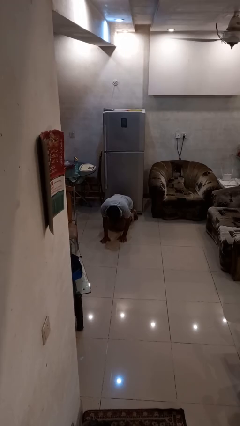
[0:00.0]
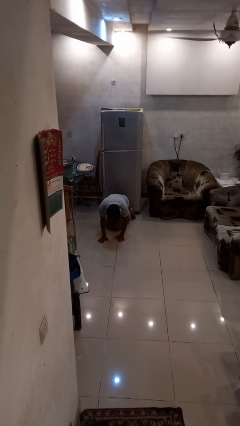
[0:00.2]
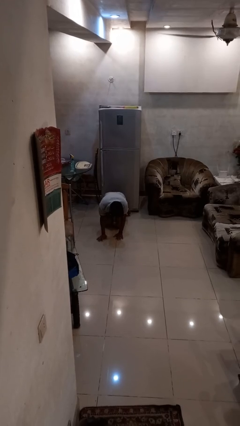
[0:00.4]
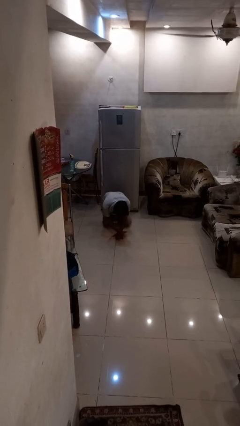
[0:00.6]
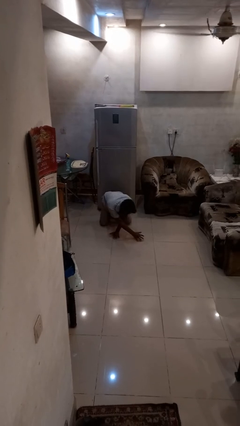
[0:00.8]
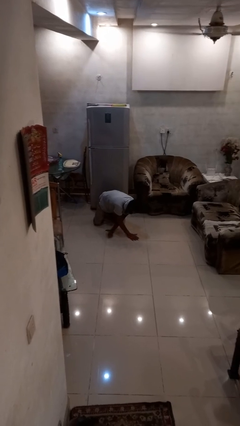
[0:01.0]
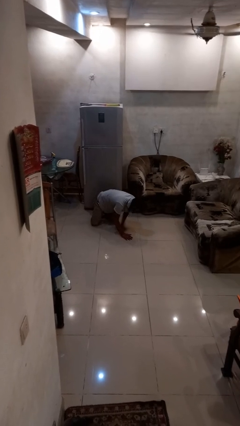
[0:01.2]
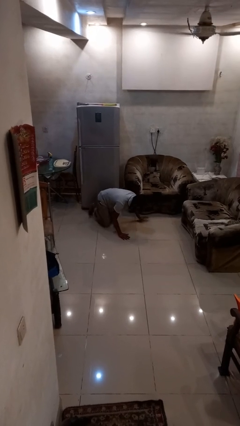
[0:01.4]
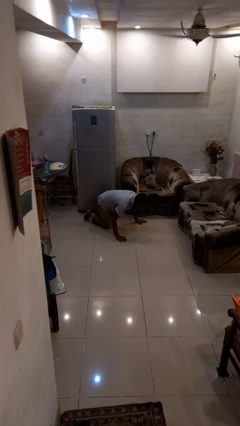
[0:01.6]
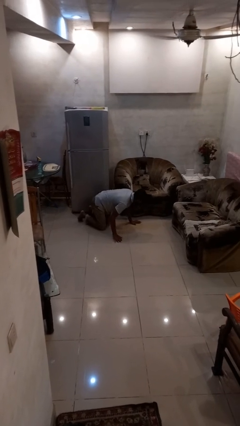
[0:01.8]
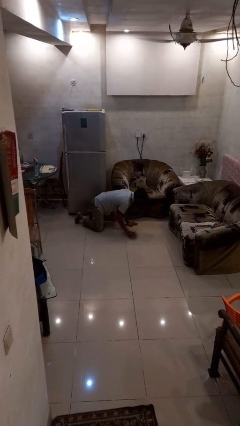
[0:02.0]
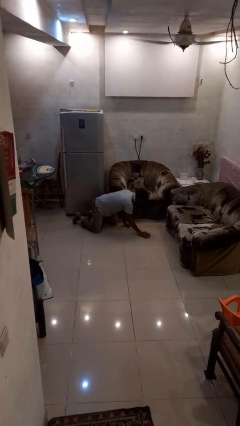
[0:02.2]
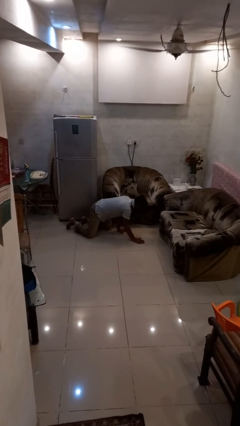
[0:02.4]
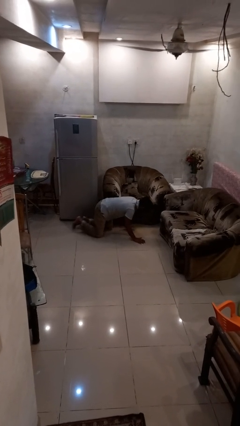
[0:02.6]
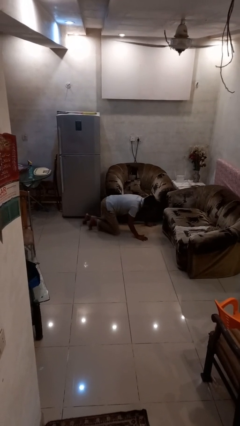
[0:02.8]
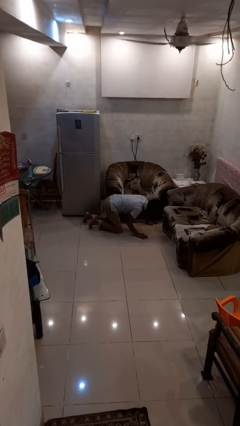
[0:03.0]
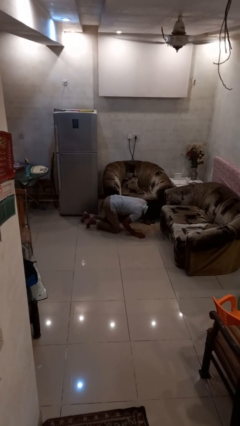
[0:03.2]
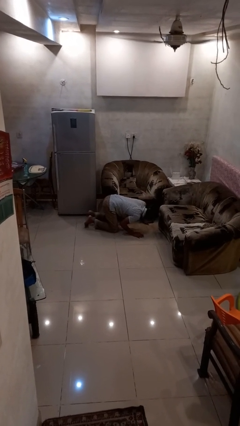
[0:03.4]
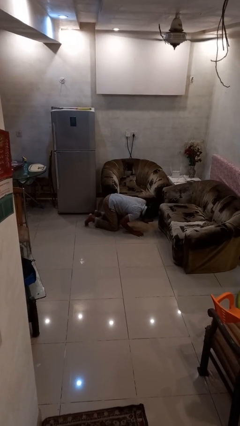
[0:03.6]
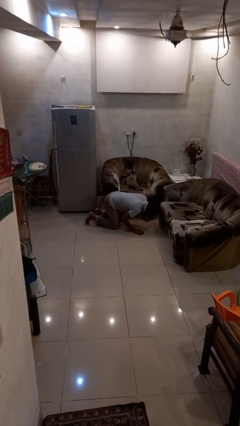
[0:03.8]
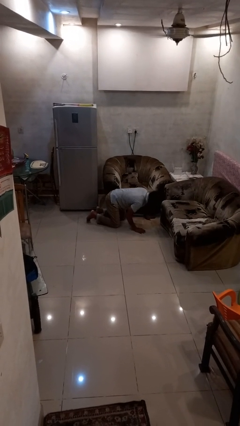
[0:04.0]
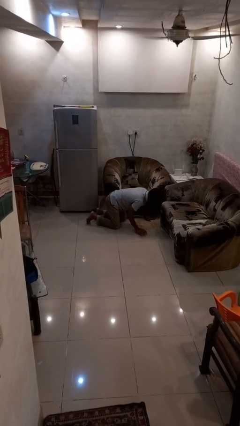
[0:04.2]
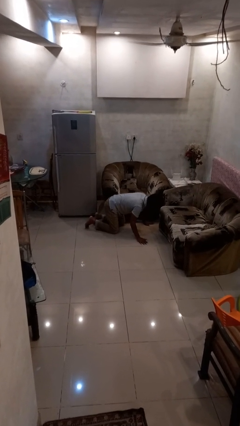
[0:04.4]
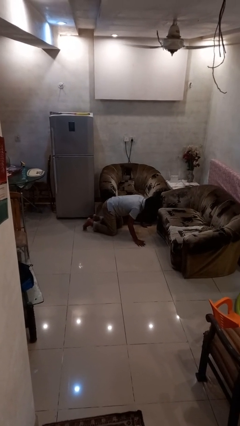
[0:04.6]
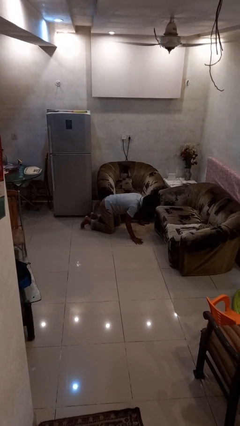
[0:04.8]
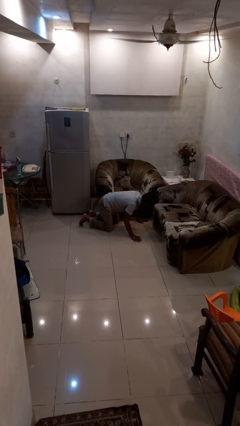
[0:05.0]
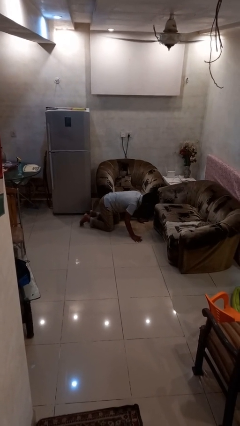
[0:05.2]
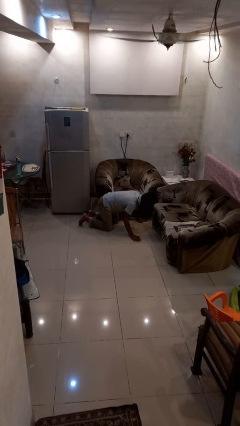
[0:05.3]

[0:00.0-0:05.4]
person crawls

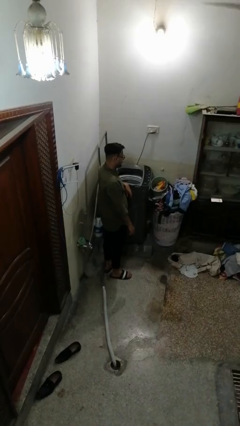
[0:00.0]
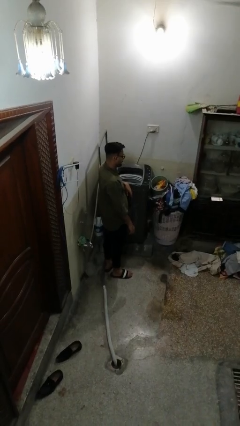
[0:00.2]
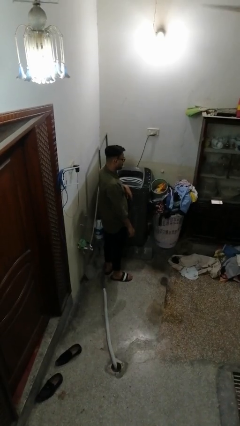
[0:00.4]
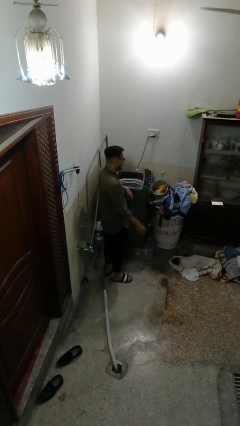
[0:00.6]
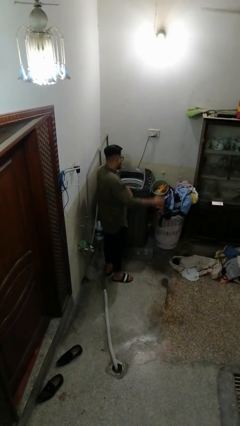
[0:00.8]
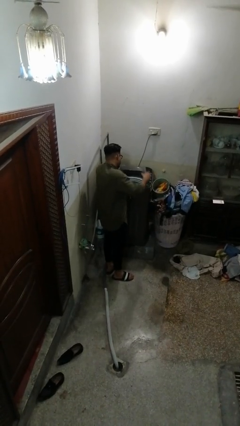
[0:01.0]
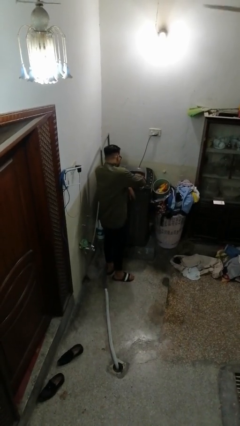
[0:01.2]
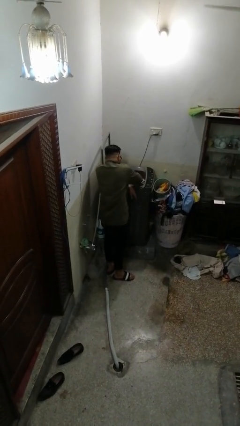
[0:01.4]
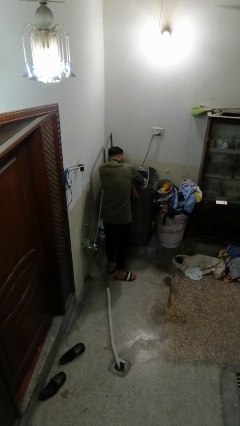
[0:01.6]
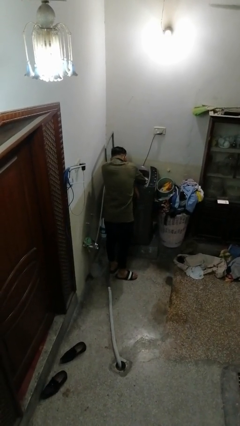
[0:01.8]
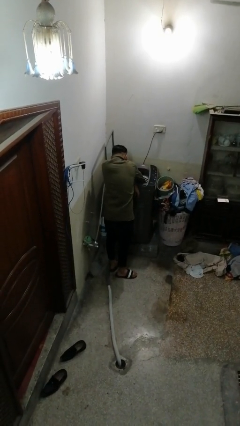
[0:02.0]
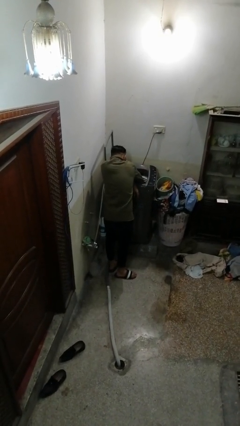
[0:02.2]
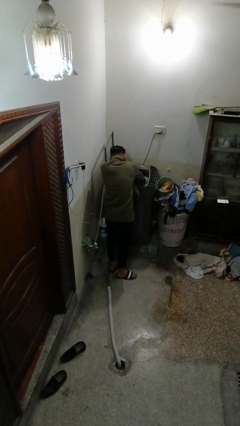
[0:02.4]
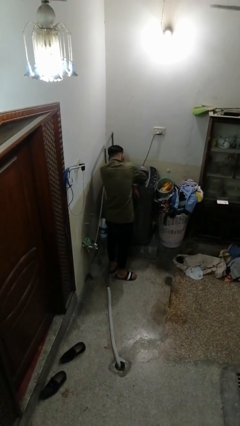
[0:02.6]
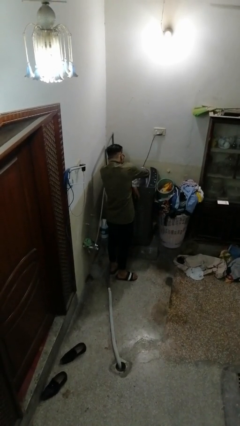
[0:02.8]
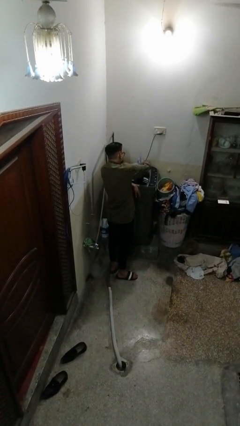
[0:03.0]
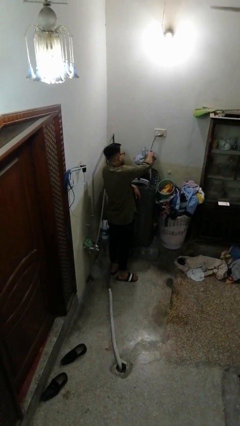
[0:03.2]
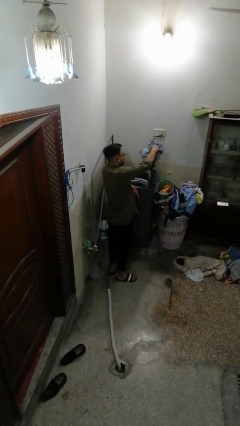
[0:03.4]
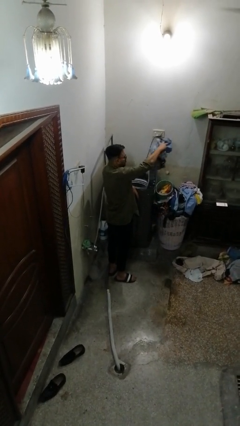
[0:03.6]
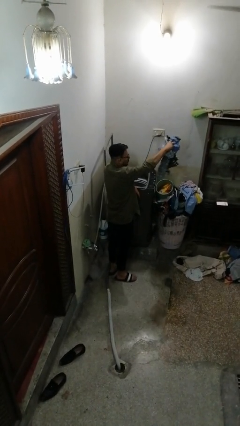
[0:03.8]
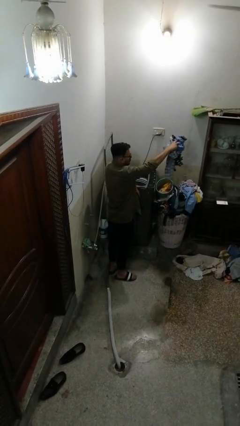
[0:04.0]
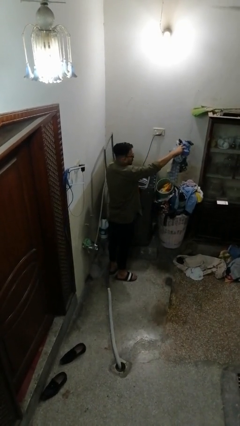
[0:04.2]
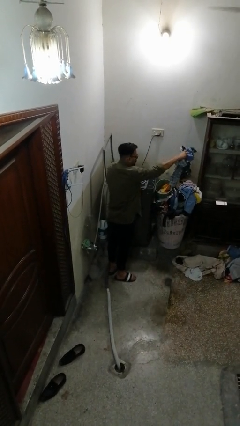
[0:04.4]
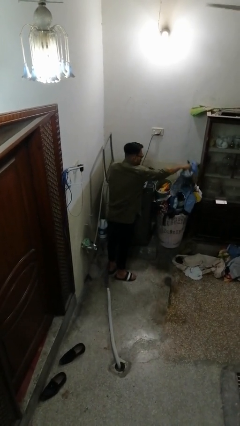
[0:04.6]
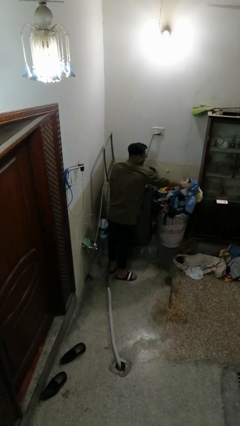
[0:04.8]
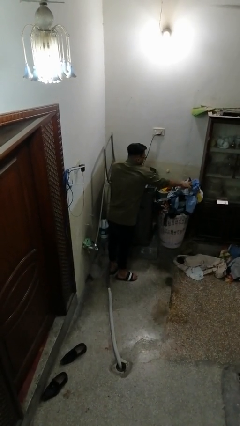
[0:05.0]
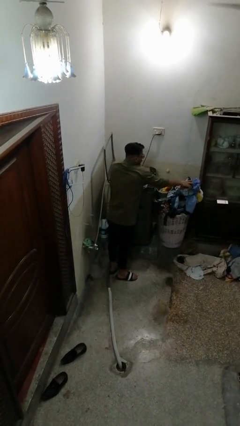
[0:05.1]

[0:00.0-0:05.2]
person unloads clotheswasher

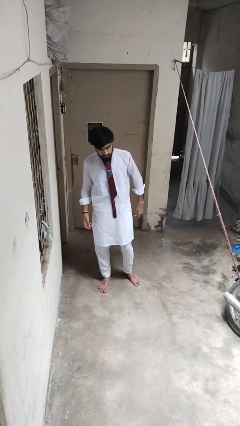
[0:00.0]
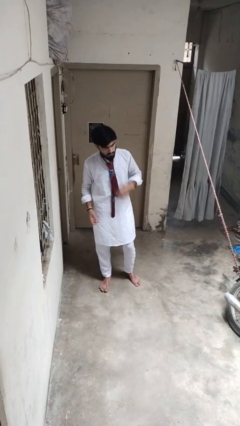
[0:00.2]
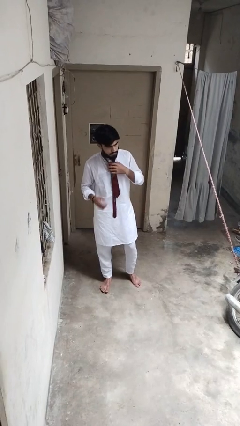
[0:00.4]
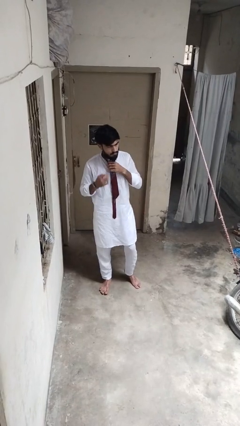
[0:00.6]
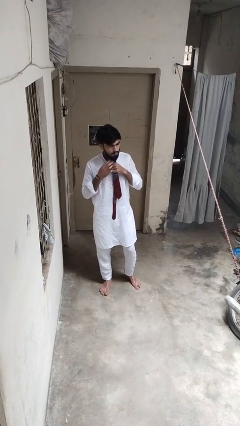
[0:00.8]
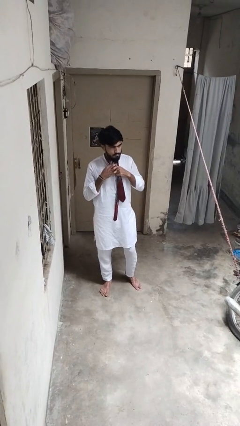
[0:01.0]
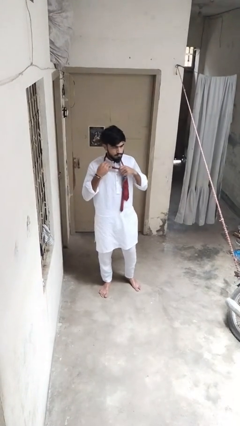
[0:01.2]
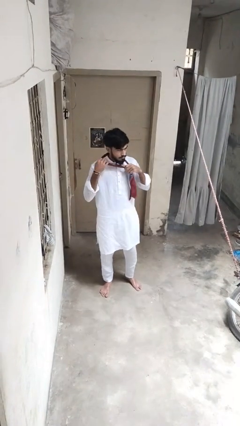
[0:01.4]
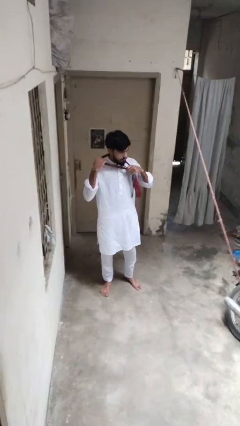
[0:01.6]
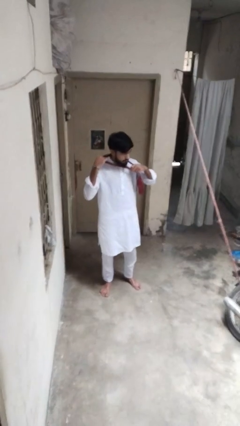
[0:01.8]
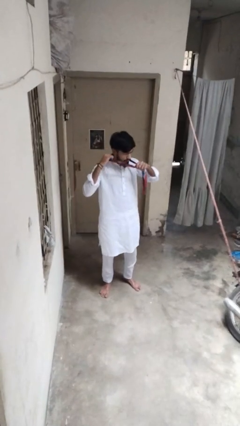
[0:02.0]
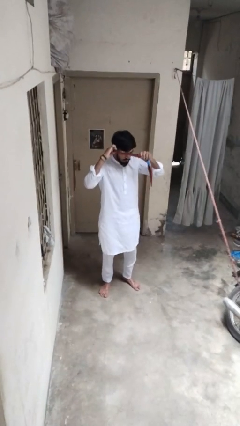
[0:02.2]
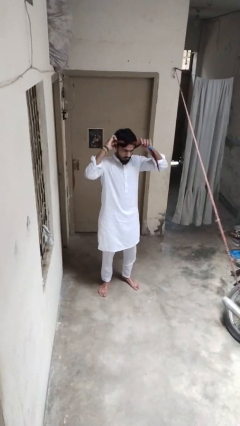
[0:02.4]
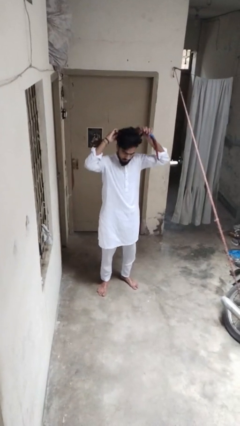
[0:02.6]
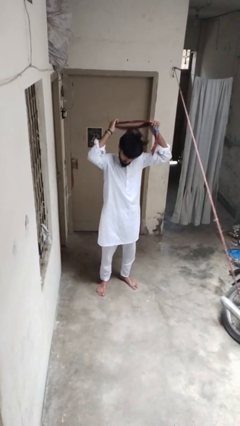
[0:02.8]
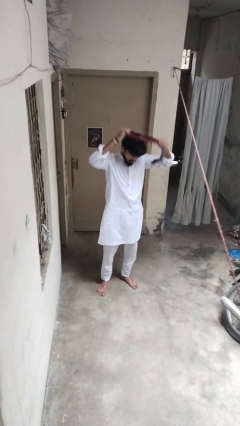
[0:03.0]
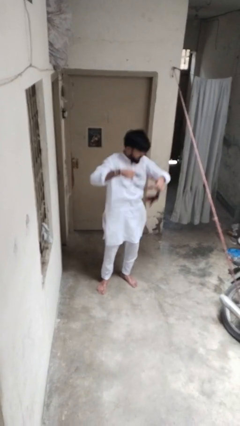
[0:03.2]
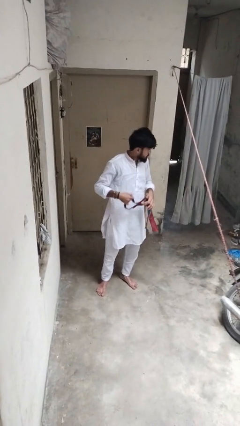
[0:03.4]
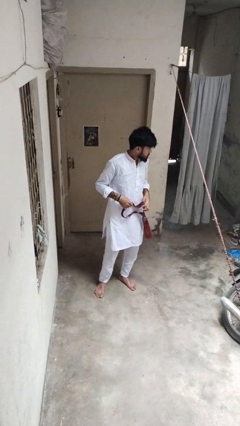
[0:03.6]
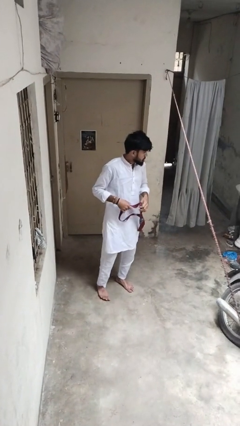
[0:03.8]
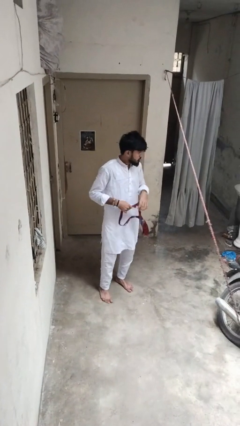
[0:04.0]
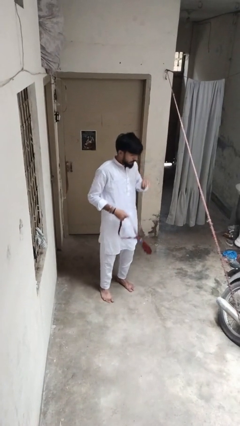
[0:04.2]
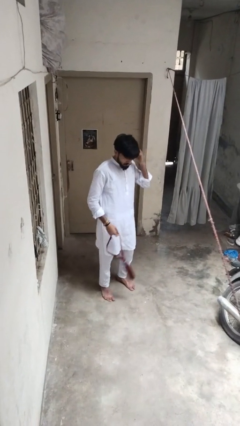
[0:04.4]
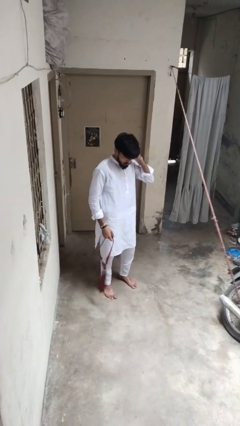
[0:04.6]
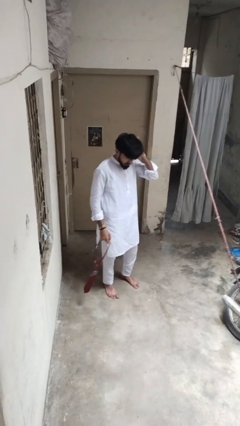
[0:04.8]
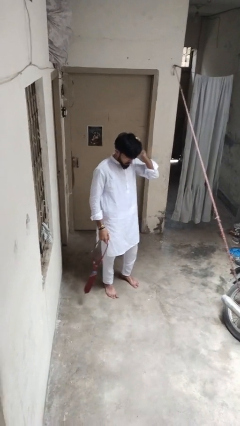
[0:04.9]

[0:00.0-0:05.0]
person takes off necktie

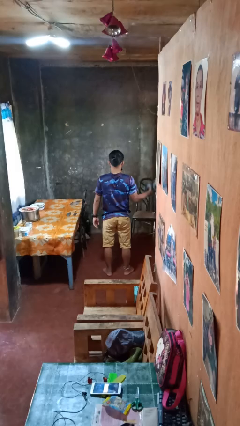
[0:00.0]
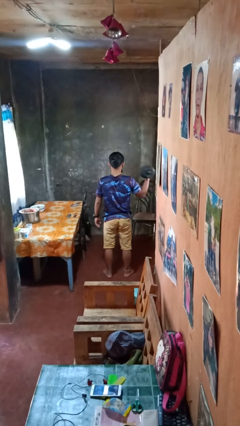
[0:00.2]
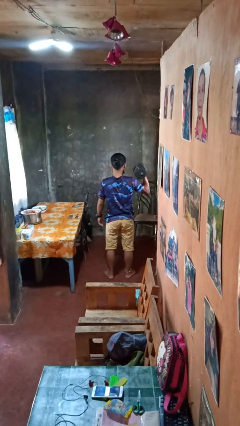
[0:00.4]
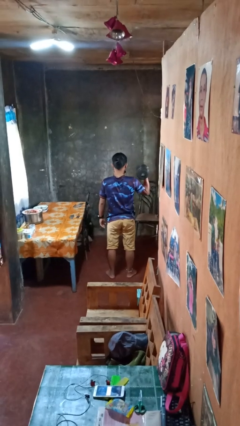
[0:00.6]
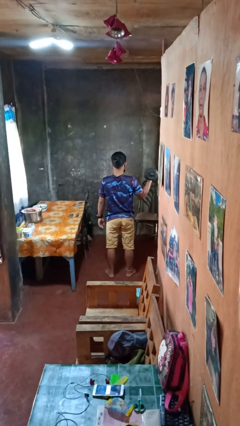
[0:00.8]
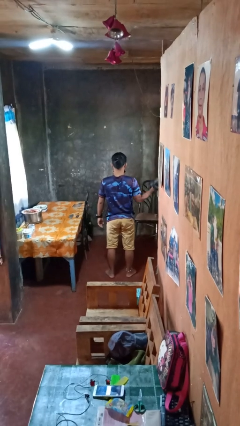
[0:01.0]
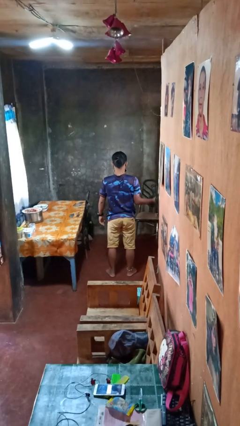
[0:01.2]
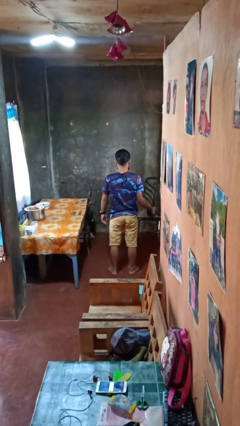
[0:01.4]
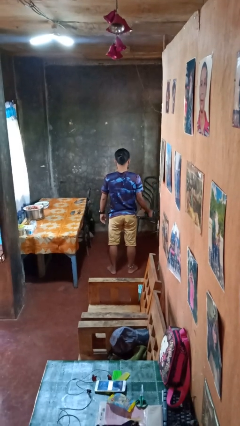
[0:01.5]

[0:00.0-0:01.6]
person lifts dumbbells

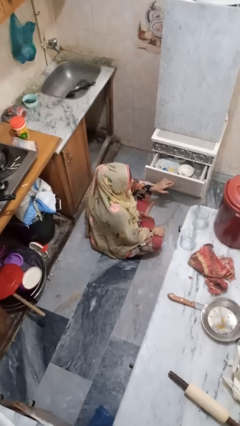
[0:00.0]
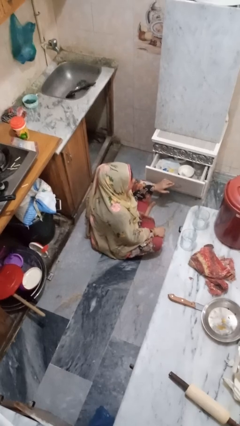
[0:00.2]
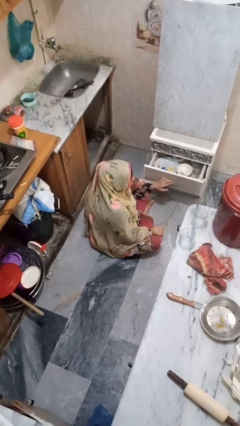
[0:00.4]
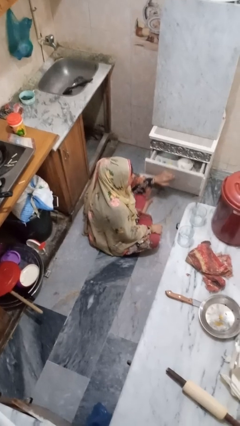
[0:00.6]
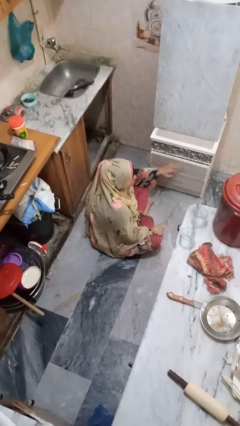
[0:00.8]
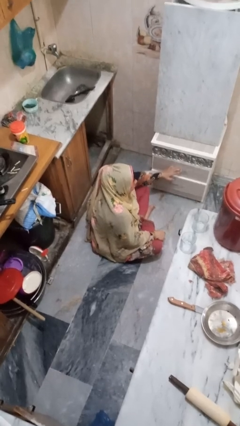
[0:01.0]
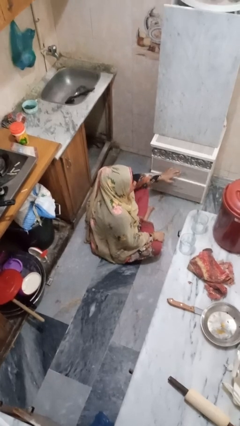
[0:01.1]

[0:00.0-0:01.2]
person closes kitchen drawer
